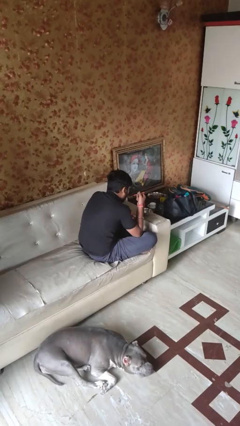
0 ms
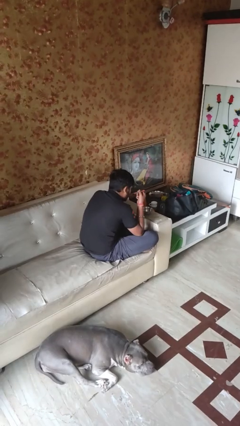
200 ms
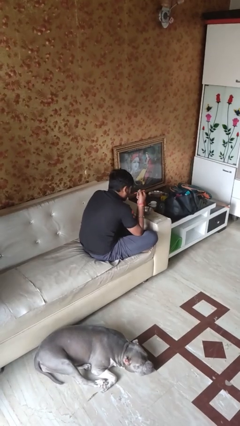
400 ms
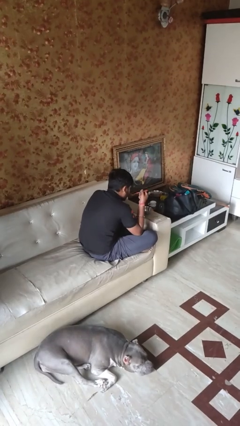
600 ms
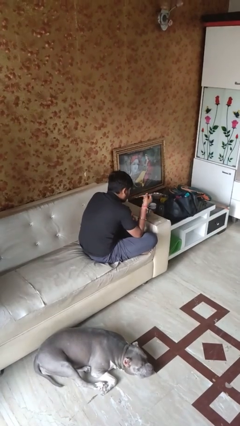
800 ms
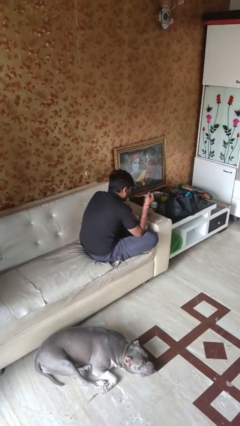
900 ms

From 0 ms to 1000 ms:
person eats with utensil

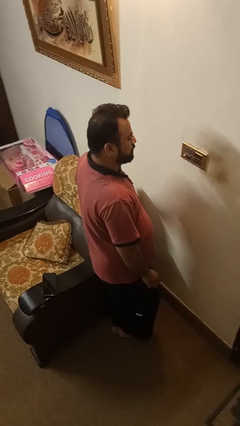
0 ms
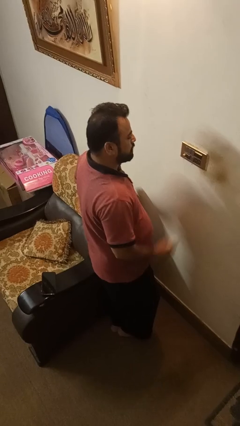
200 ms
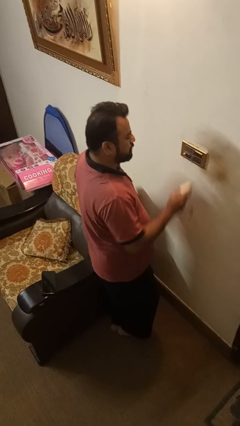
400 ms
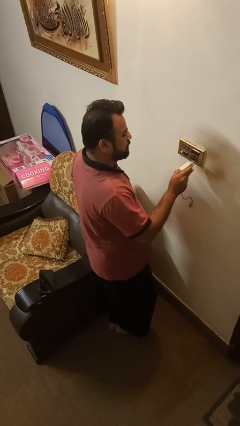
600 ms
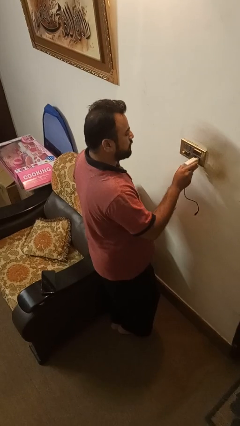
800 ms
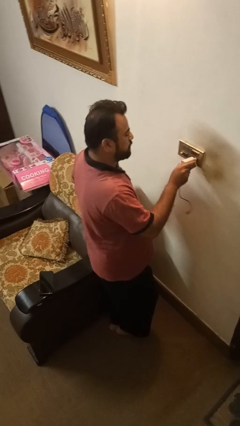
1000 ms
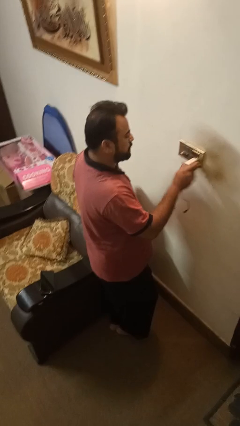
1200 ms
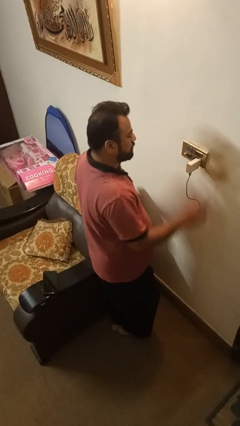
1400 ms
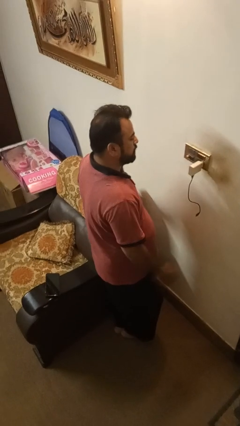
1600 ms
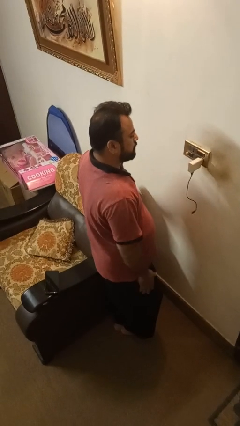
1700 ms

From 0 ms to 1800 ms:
person plugs into electrical socket

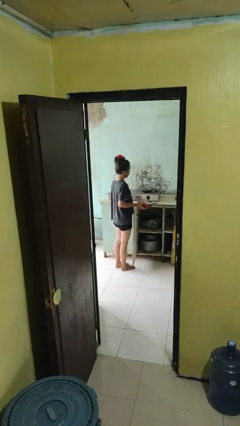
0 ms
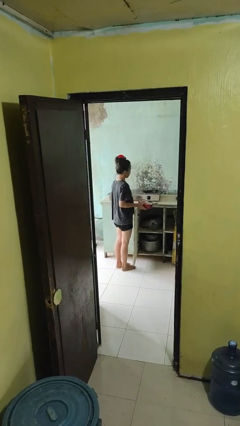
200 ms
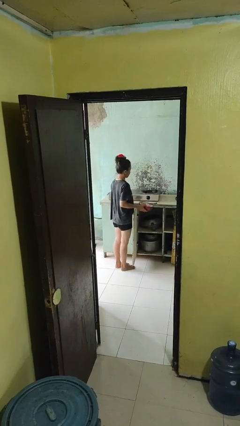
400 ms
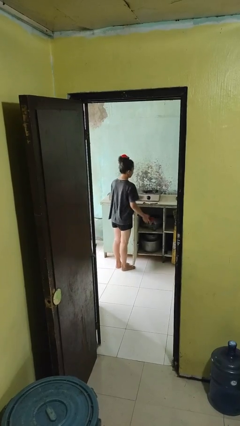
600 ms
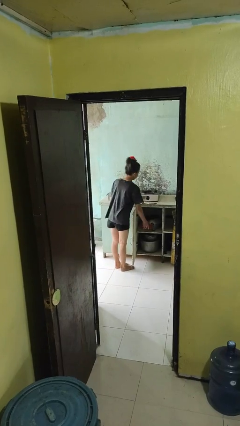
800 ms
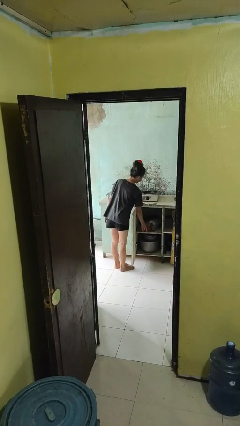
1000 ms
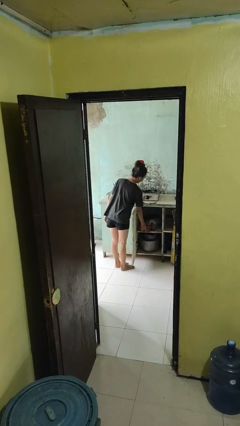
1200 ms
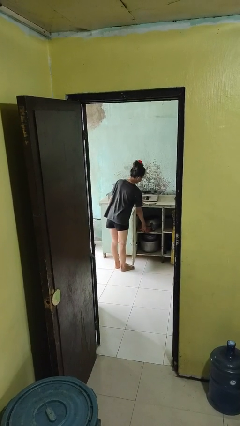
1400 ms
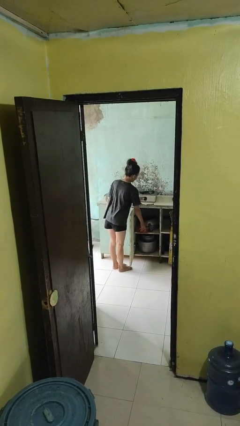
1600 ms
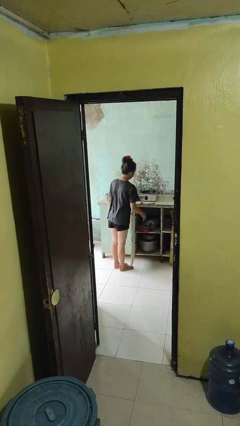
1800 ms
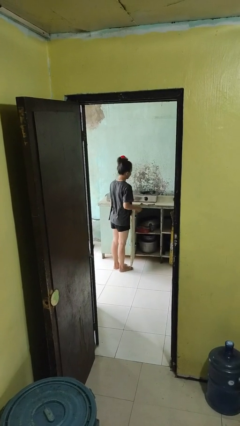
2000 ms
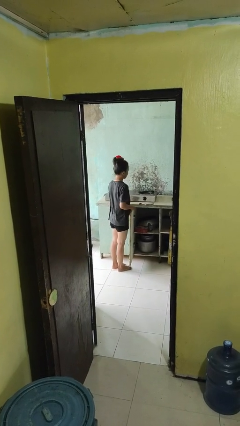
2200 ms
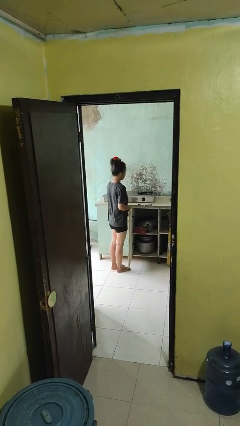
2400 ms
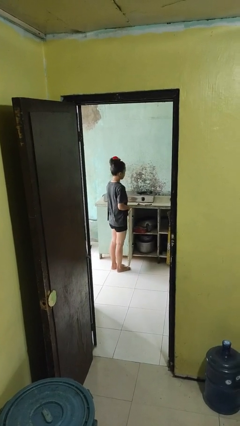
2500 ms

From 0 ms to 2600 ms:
person puts object in cabinet

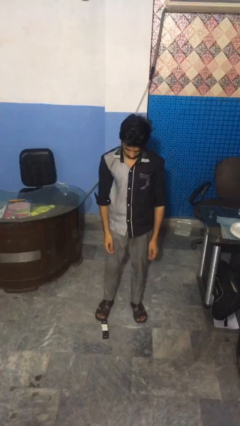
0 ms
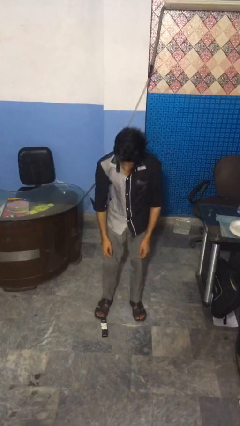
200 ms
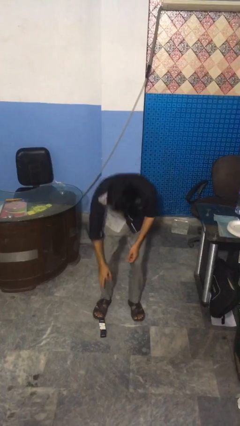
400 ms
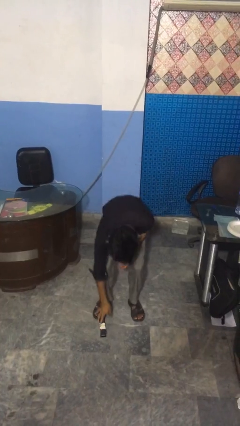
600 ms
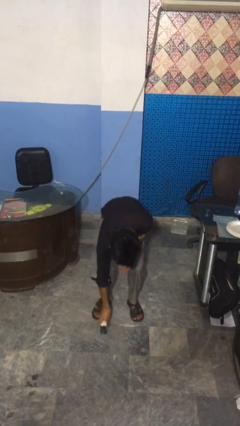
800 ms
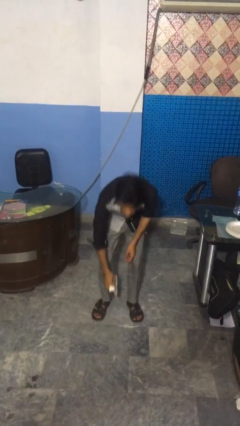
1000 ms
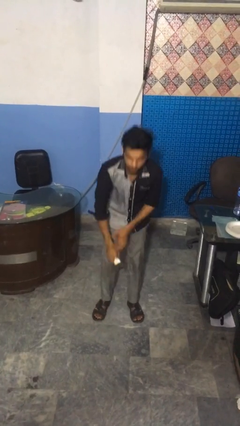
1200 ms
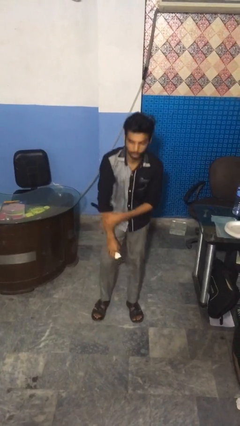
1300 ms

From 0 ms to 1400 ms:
person picks up object from floor

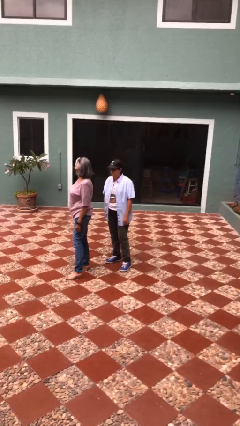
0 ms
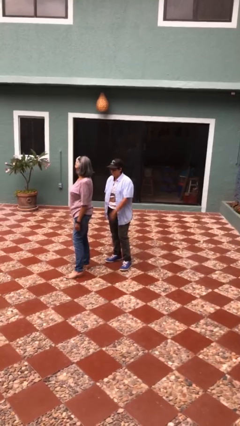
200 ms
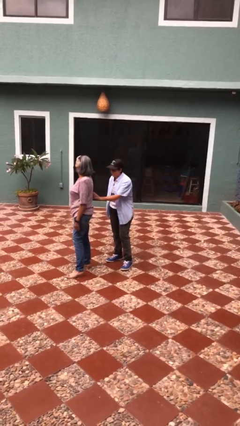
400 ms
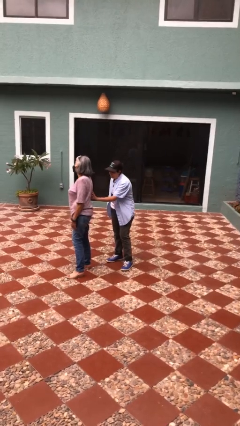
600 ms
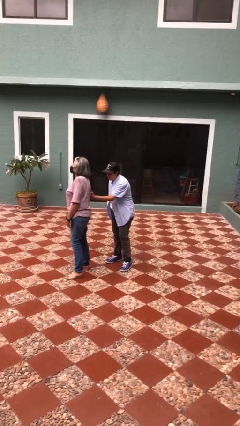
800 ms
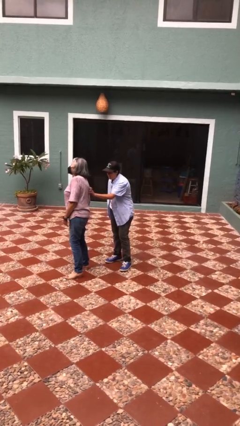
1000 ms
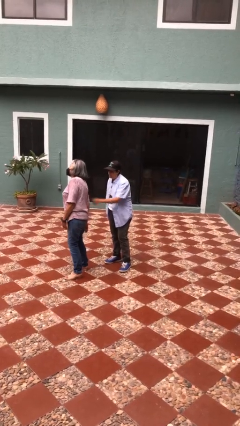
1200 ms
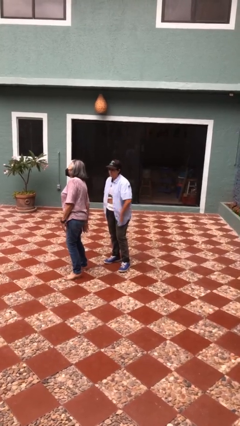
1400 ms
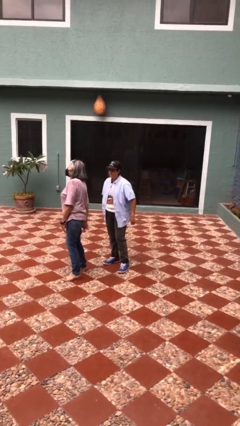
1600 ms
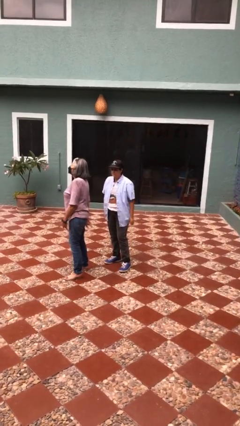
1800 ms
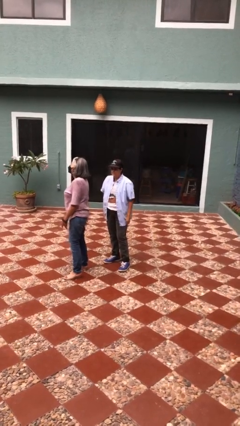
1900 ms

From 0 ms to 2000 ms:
person tickles person

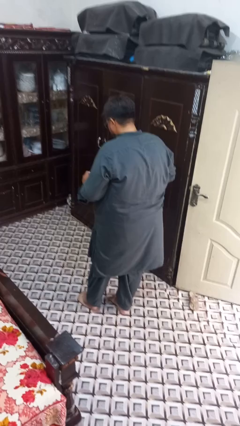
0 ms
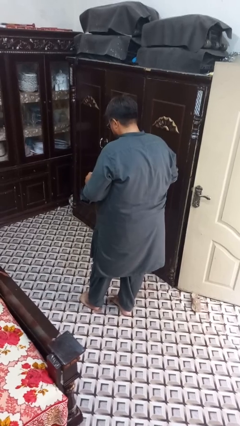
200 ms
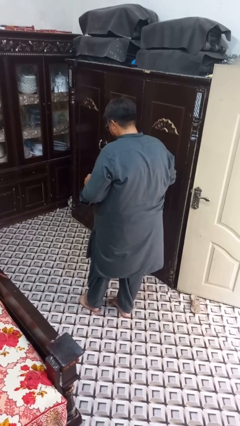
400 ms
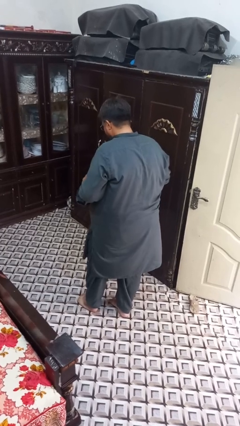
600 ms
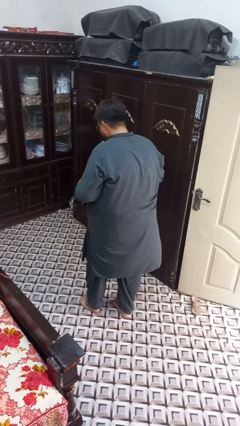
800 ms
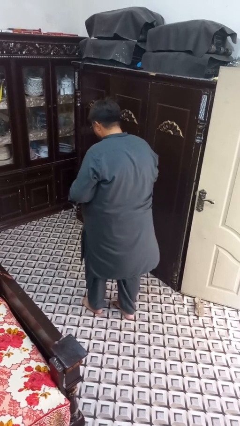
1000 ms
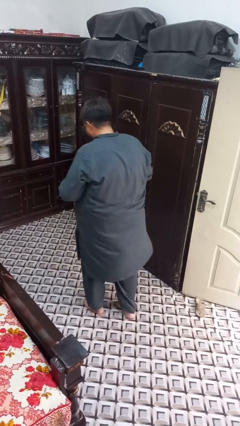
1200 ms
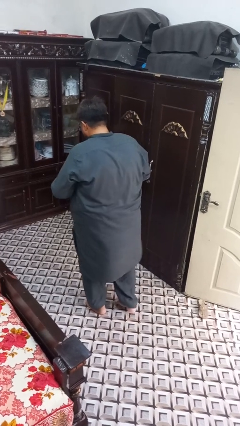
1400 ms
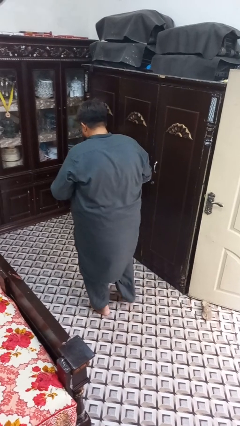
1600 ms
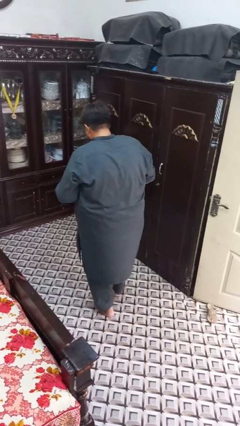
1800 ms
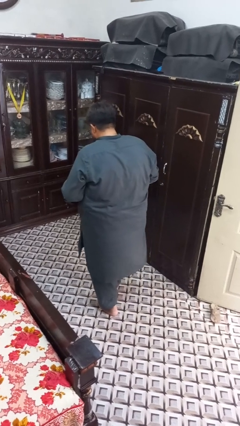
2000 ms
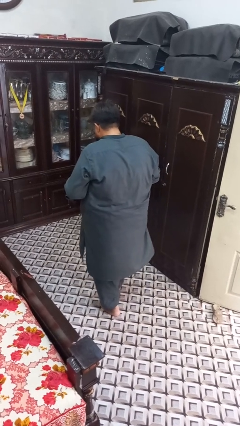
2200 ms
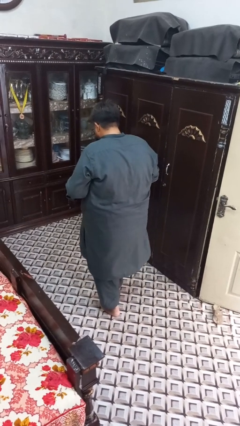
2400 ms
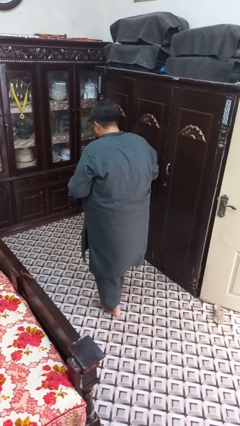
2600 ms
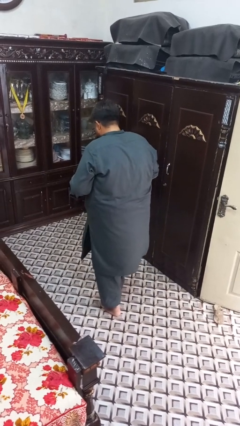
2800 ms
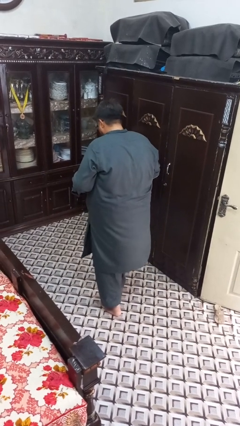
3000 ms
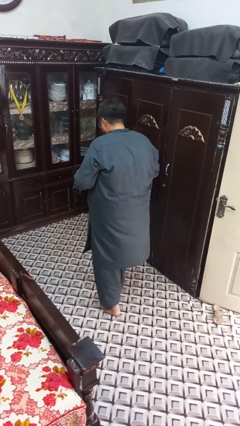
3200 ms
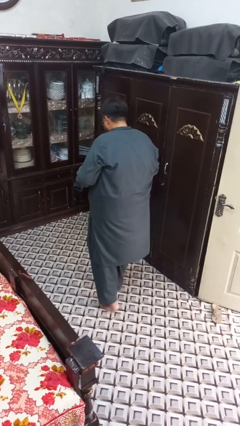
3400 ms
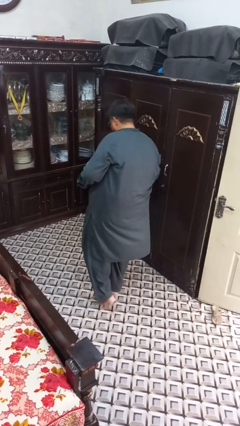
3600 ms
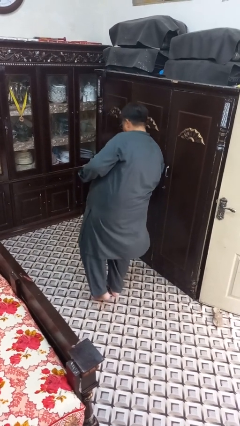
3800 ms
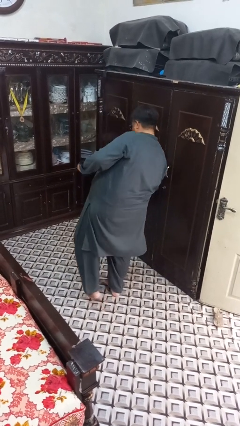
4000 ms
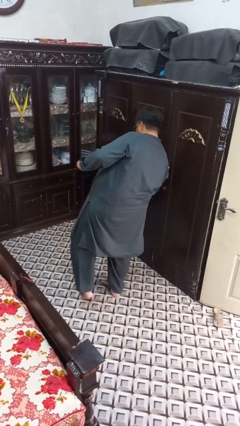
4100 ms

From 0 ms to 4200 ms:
person walks tiptoe

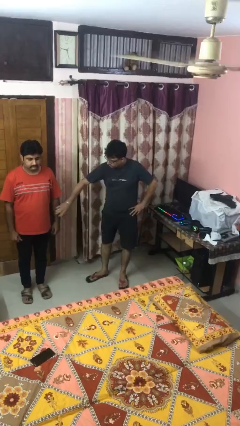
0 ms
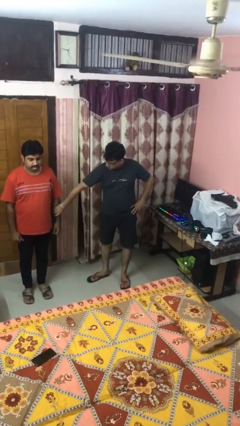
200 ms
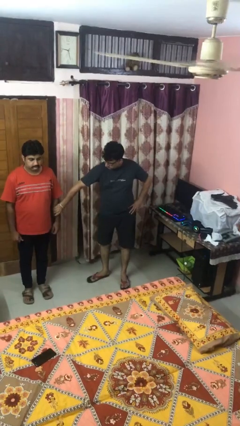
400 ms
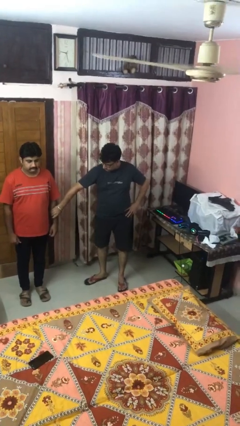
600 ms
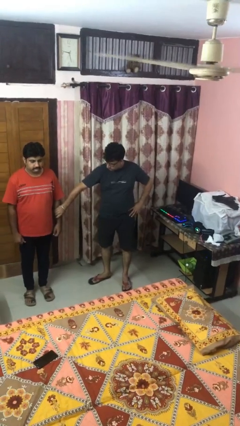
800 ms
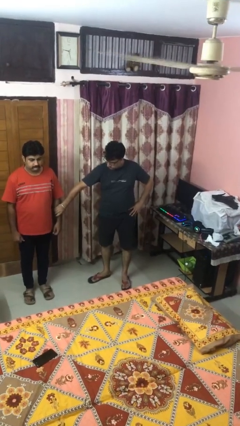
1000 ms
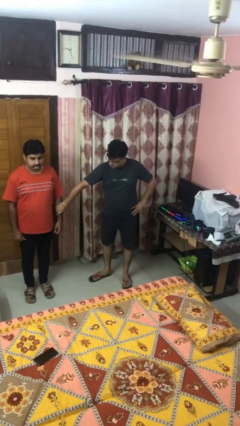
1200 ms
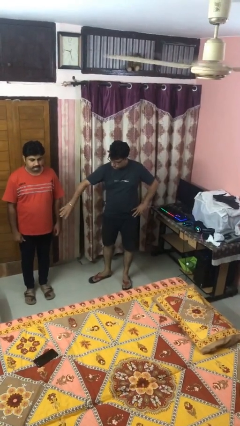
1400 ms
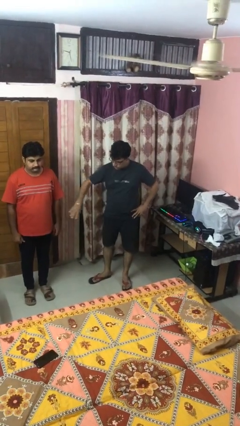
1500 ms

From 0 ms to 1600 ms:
person grabs person by forearm

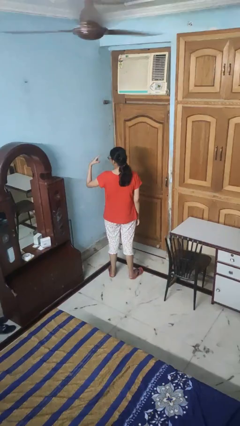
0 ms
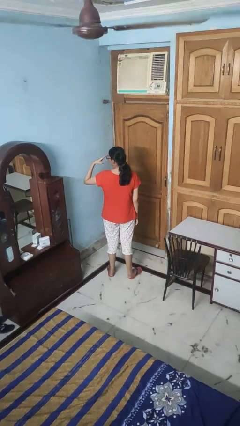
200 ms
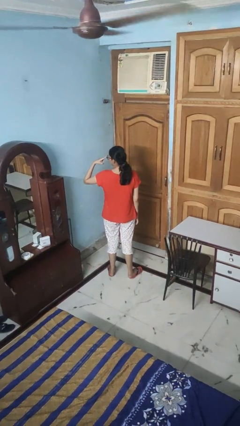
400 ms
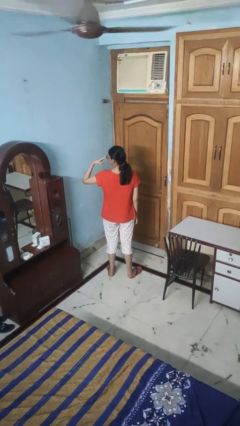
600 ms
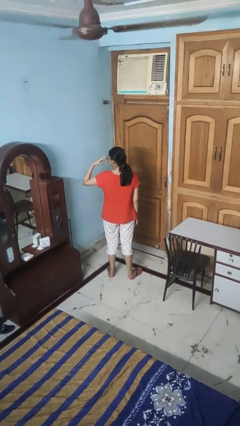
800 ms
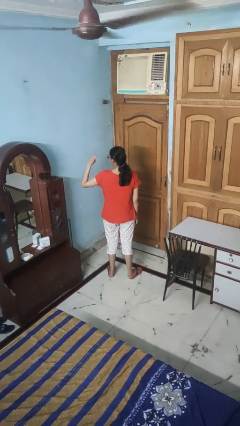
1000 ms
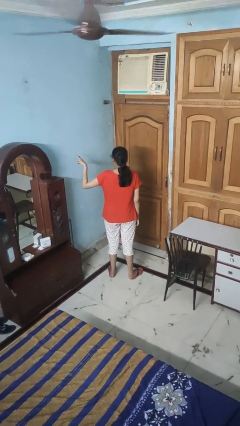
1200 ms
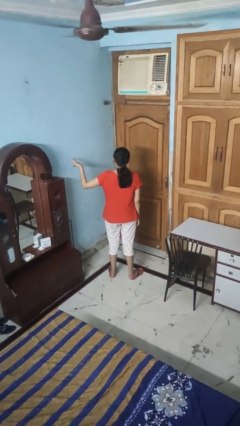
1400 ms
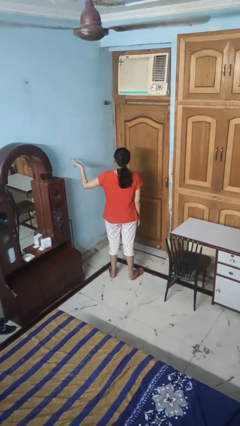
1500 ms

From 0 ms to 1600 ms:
person gestures watch closely

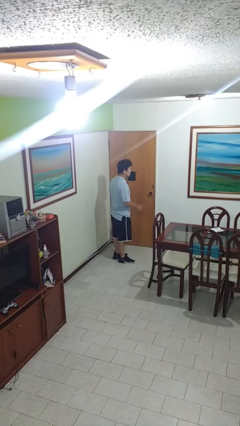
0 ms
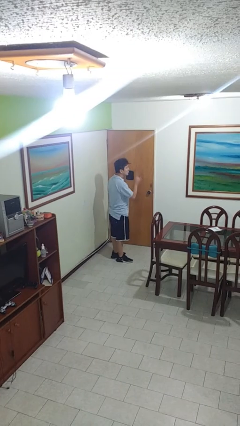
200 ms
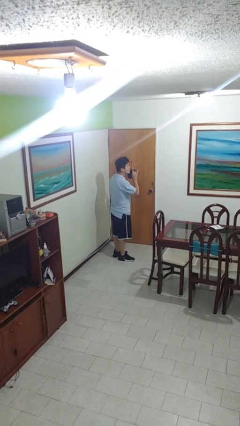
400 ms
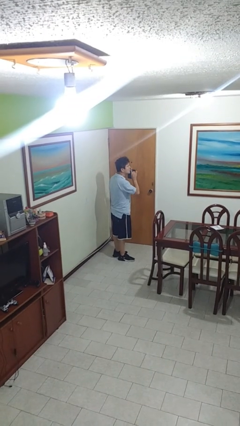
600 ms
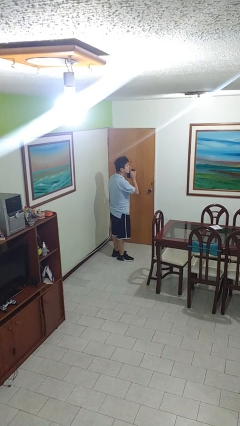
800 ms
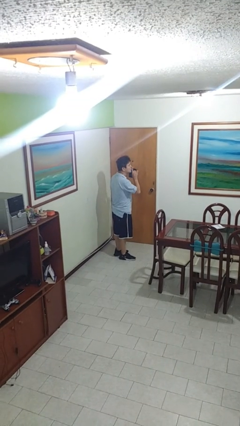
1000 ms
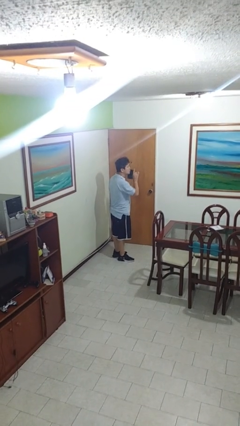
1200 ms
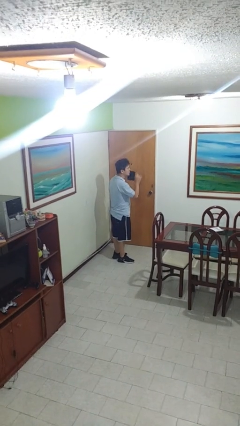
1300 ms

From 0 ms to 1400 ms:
person gestures be quiet
